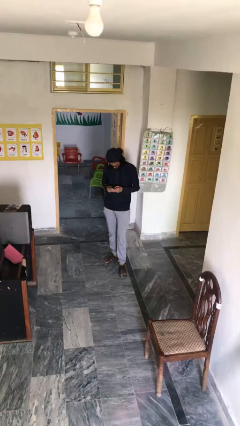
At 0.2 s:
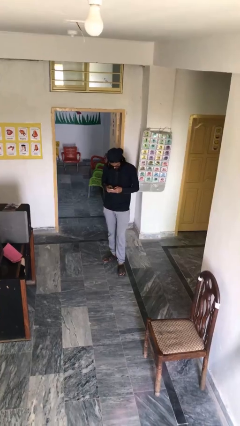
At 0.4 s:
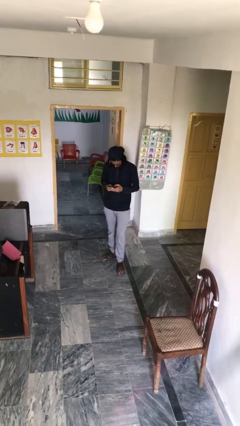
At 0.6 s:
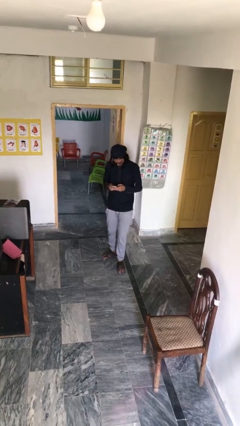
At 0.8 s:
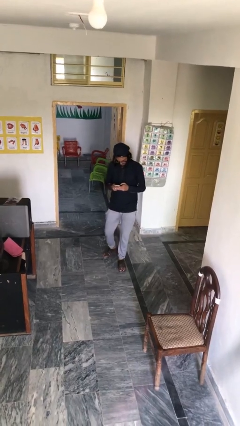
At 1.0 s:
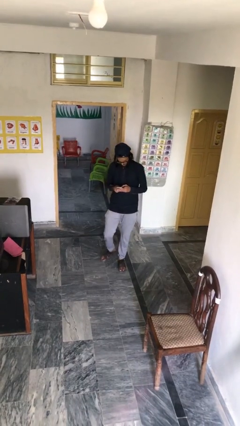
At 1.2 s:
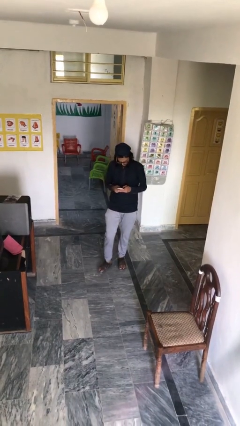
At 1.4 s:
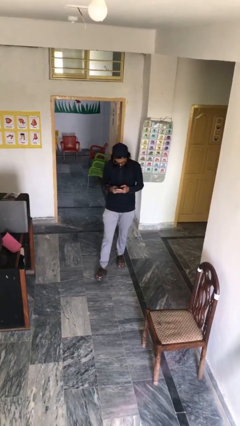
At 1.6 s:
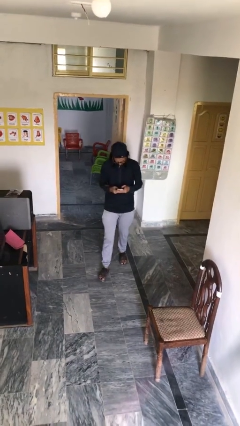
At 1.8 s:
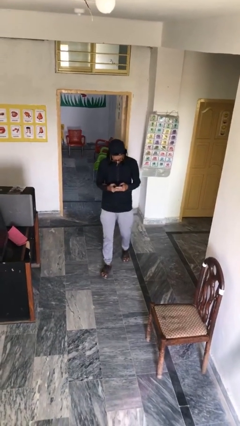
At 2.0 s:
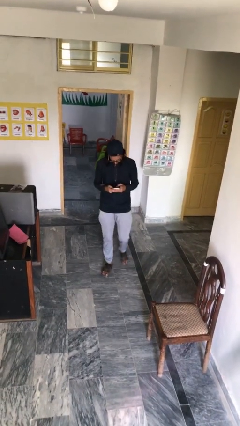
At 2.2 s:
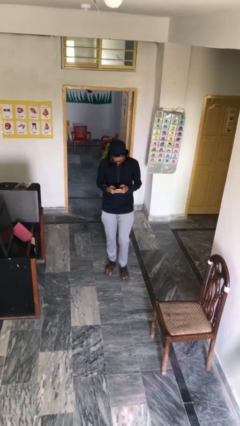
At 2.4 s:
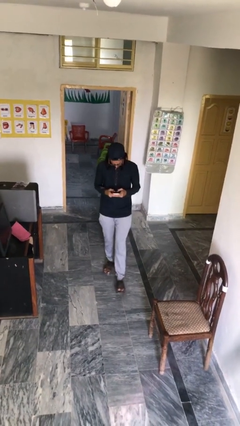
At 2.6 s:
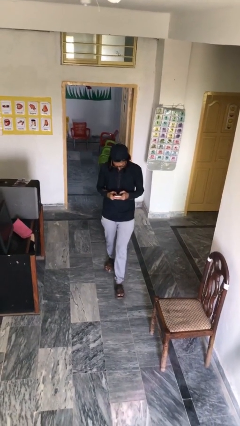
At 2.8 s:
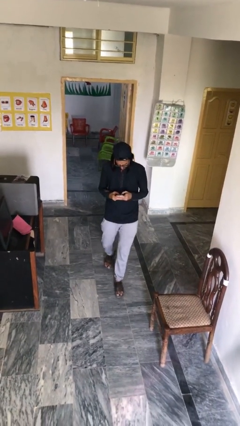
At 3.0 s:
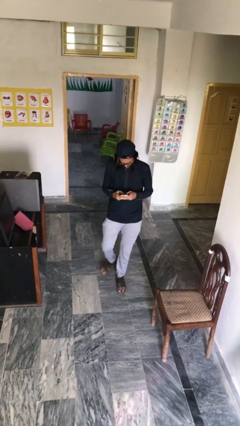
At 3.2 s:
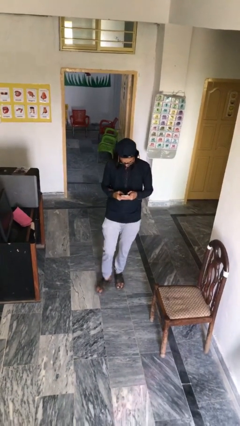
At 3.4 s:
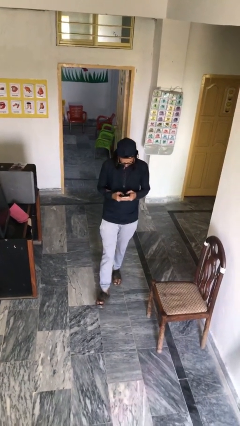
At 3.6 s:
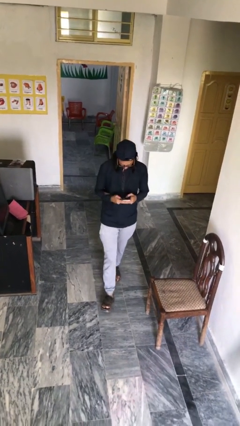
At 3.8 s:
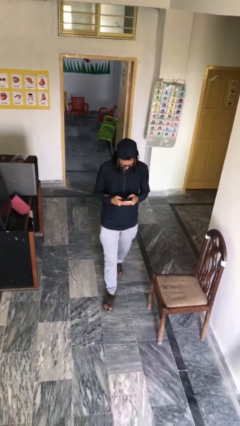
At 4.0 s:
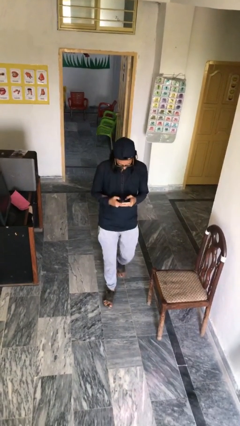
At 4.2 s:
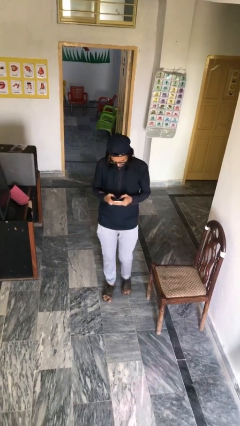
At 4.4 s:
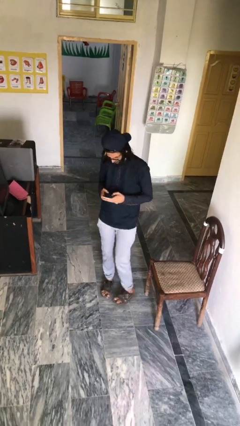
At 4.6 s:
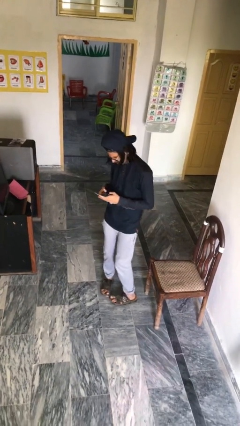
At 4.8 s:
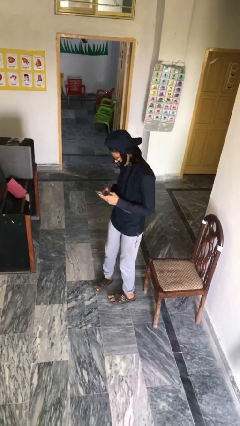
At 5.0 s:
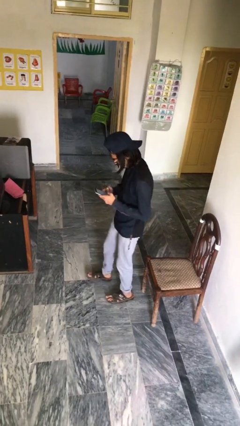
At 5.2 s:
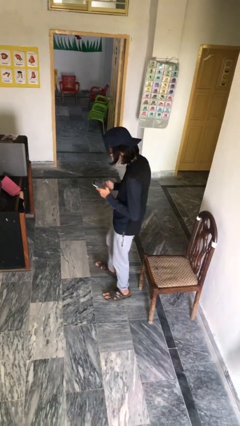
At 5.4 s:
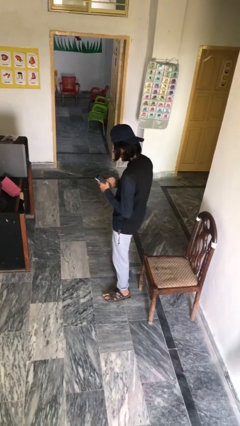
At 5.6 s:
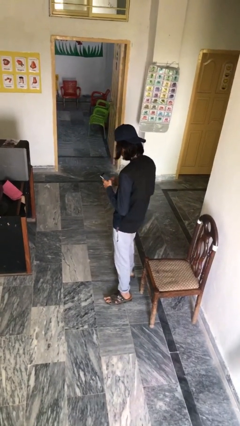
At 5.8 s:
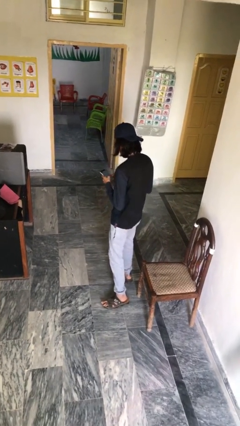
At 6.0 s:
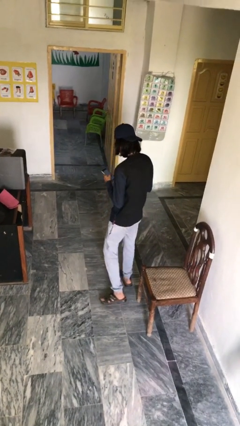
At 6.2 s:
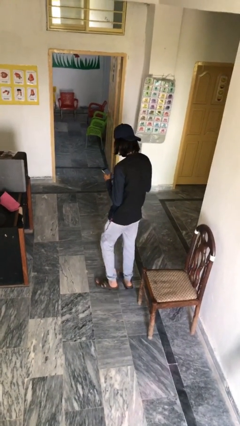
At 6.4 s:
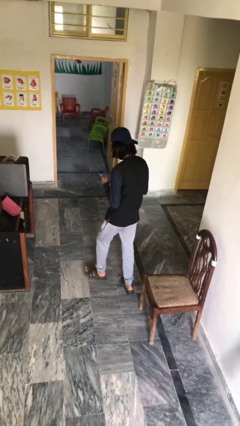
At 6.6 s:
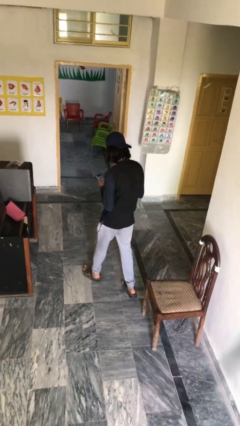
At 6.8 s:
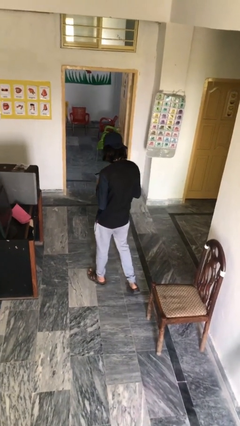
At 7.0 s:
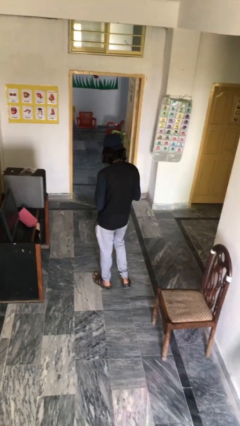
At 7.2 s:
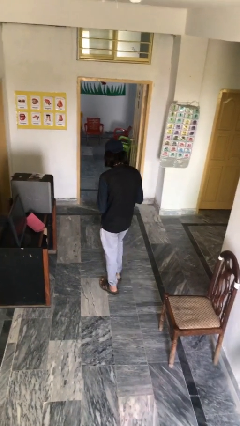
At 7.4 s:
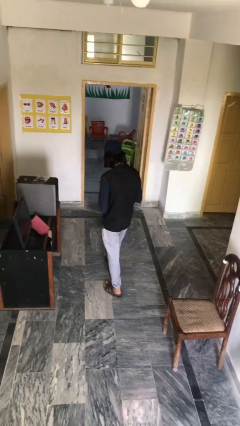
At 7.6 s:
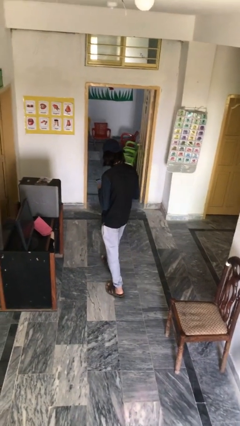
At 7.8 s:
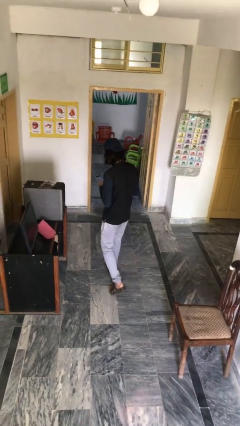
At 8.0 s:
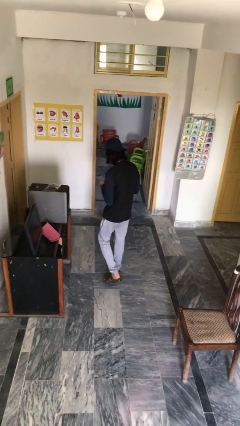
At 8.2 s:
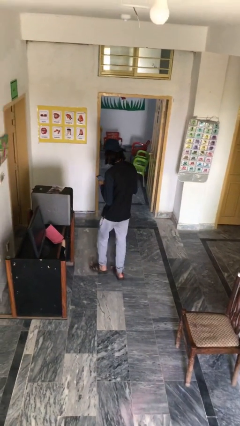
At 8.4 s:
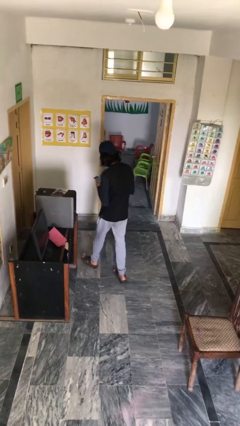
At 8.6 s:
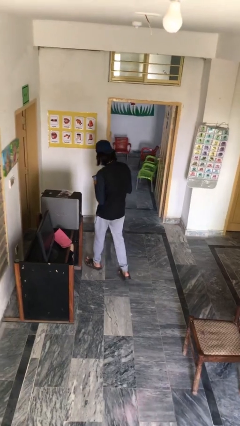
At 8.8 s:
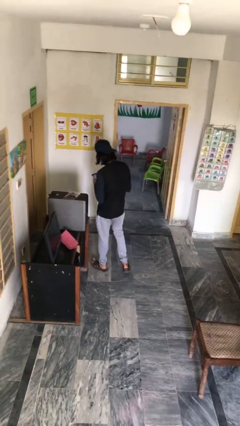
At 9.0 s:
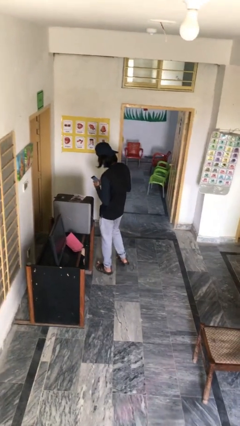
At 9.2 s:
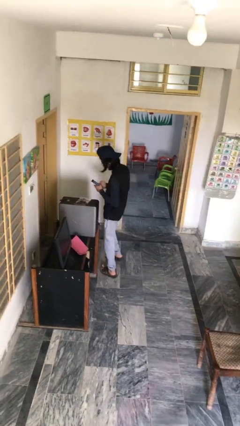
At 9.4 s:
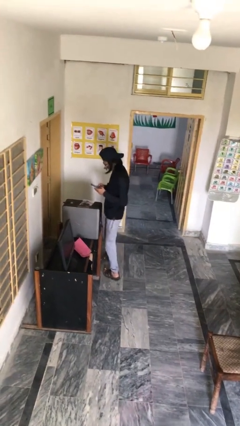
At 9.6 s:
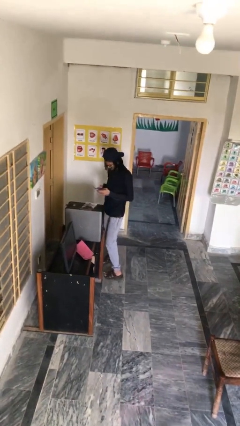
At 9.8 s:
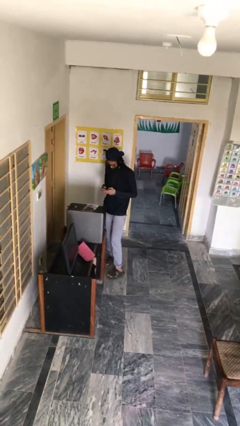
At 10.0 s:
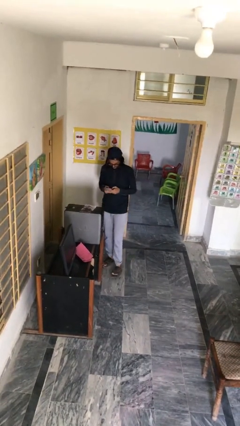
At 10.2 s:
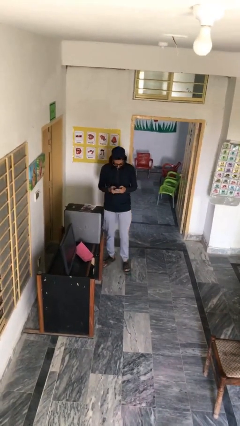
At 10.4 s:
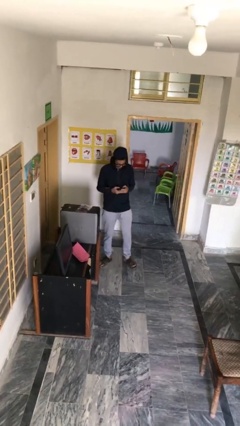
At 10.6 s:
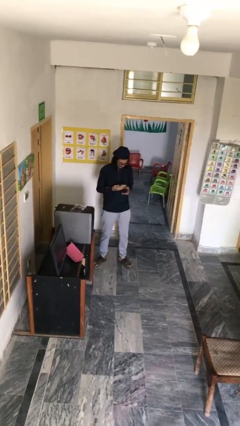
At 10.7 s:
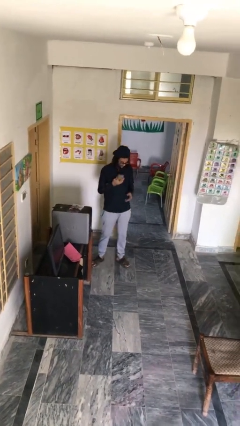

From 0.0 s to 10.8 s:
person texts on phone

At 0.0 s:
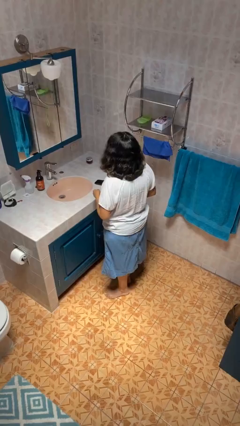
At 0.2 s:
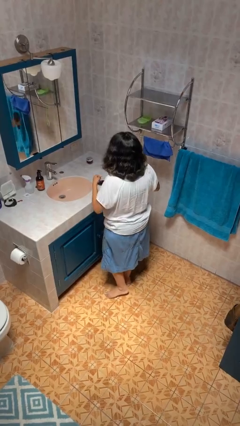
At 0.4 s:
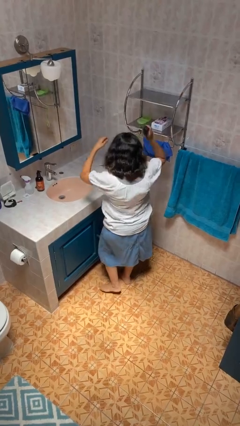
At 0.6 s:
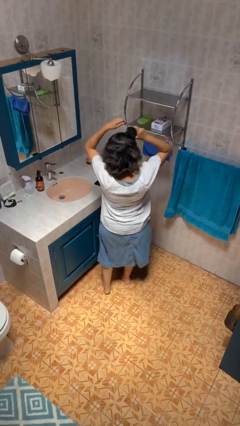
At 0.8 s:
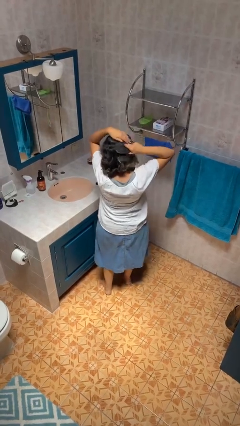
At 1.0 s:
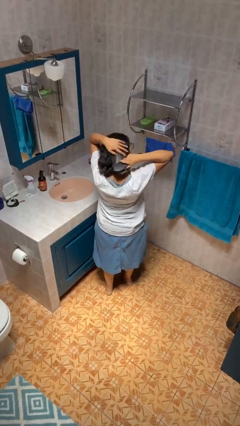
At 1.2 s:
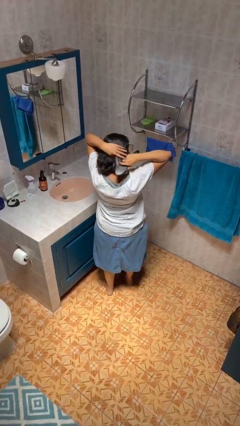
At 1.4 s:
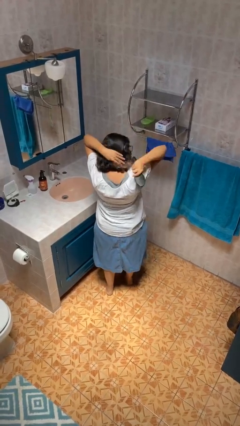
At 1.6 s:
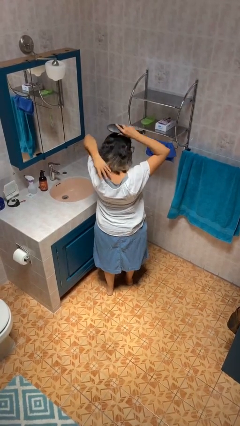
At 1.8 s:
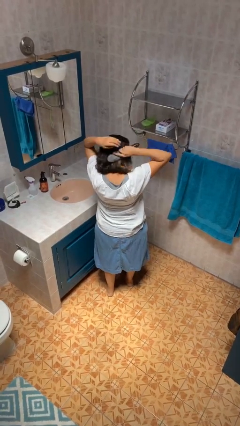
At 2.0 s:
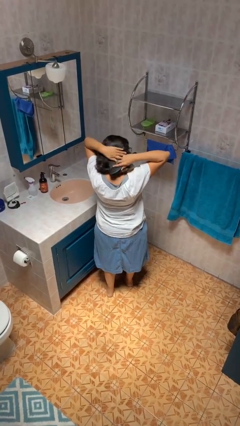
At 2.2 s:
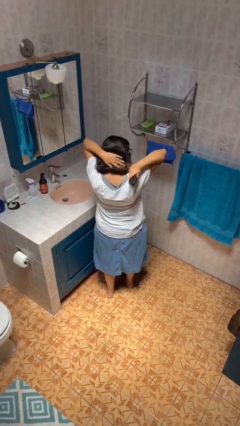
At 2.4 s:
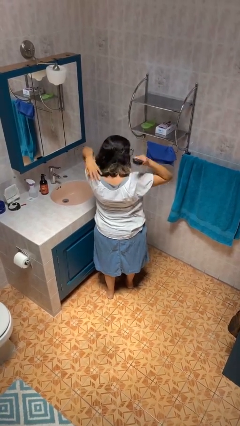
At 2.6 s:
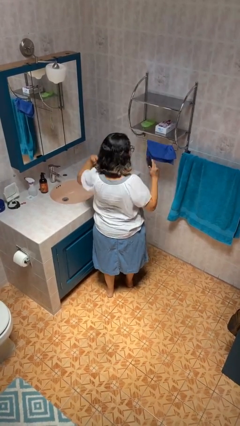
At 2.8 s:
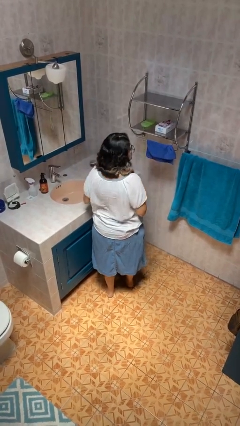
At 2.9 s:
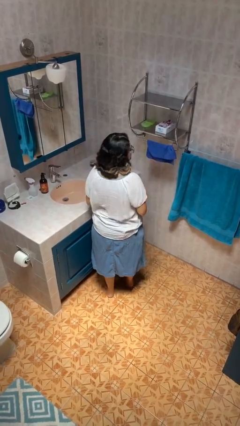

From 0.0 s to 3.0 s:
person brushes hair

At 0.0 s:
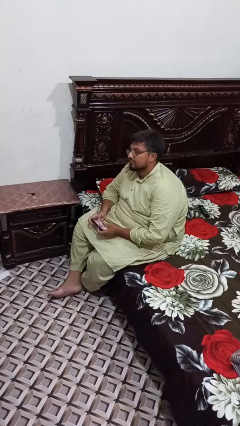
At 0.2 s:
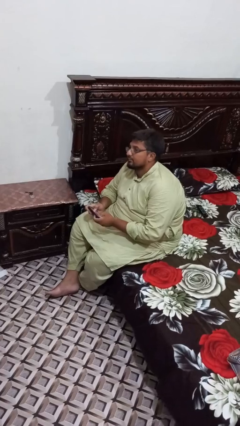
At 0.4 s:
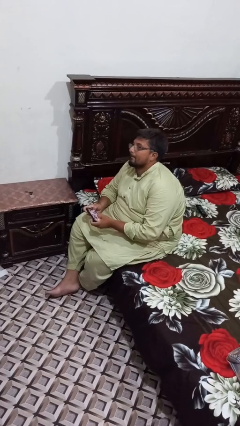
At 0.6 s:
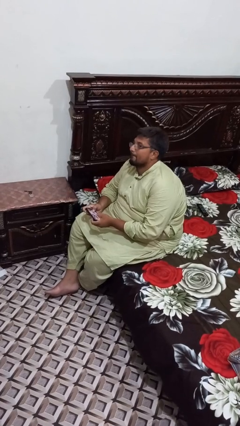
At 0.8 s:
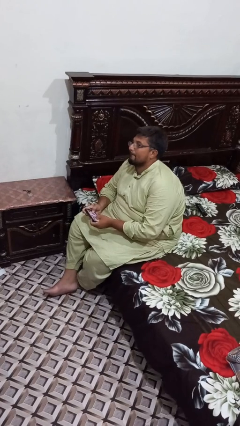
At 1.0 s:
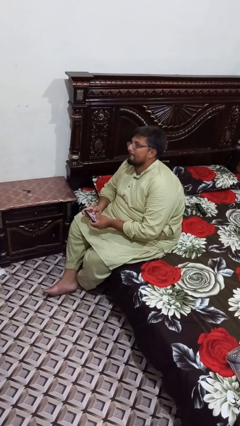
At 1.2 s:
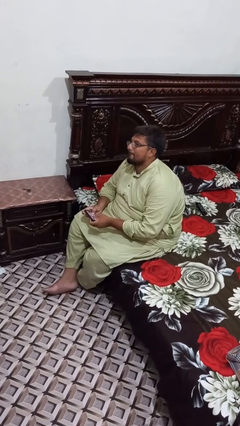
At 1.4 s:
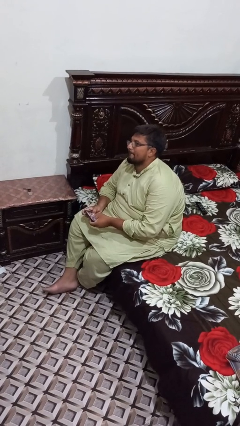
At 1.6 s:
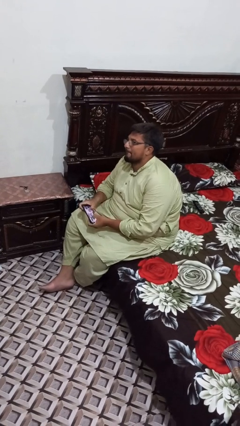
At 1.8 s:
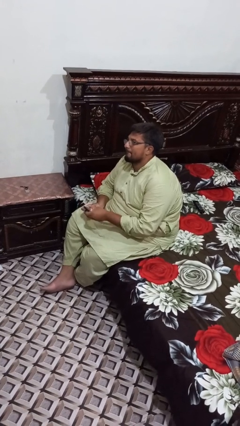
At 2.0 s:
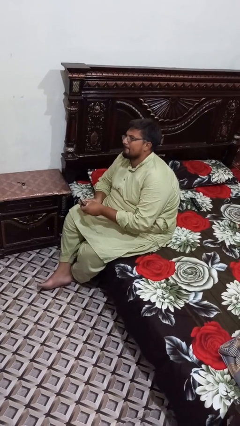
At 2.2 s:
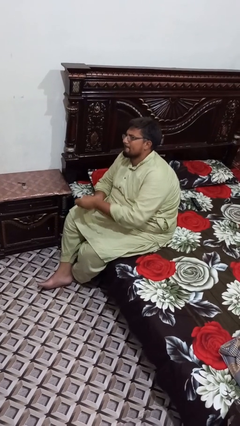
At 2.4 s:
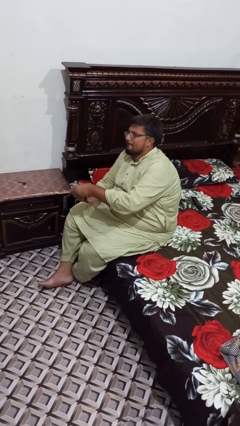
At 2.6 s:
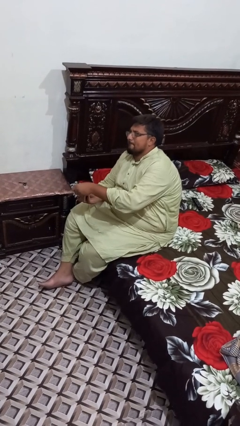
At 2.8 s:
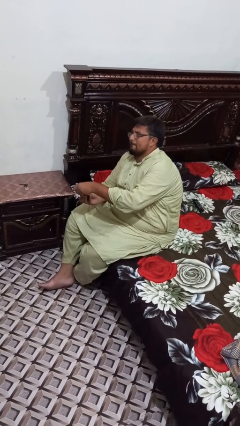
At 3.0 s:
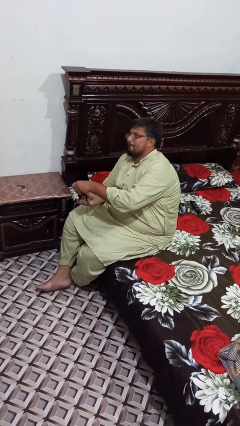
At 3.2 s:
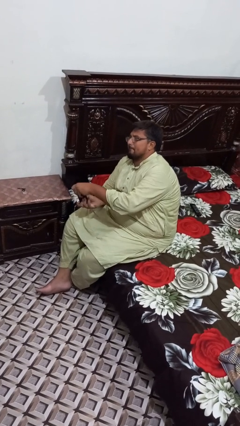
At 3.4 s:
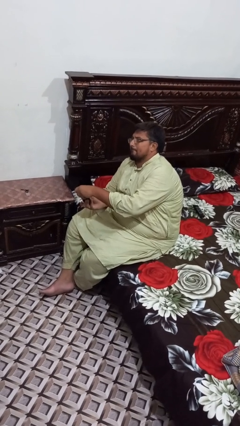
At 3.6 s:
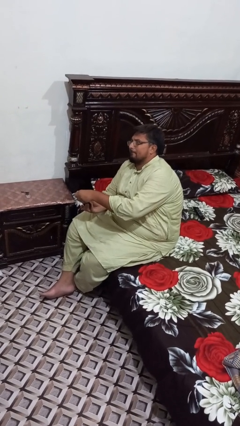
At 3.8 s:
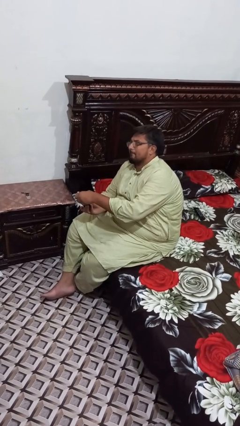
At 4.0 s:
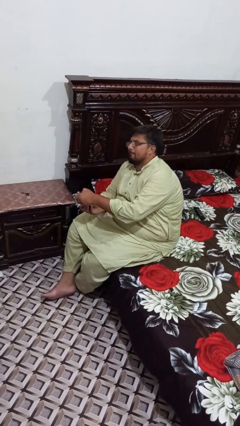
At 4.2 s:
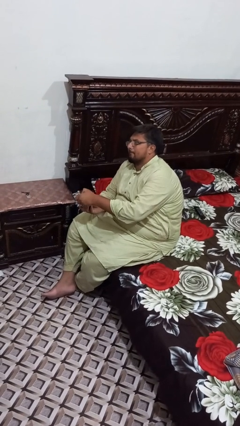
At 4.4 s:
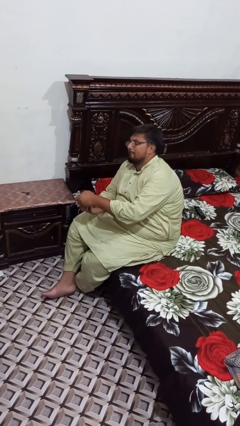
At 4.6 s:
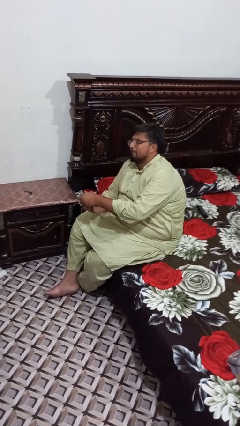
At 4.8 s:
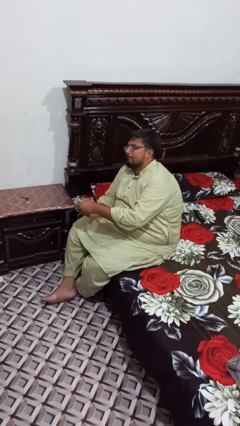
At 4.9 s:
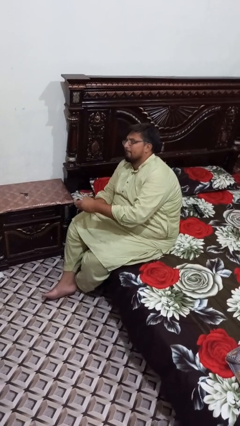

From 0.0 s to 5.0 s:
person interacts with handheld game
